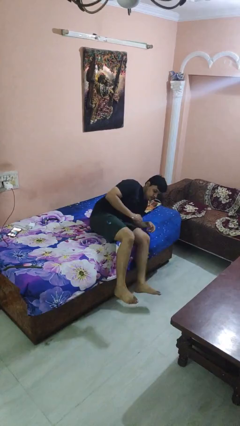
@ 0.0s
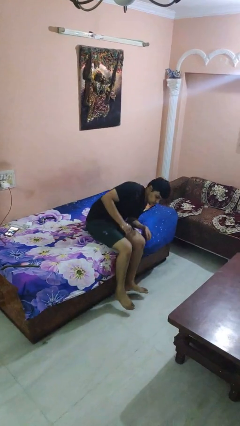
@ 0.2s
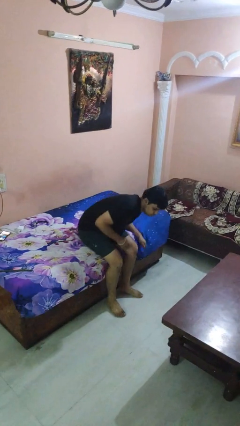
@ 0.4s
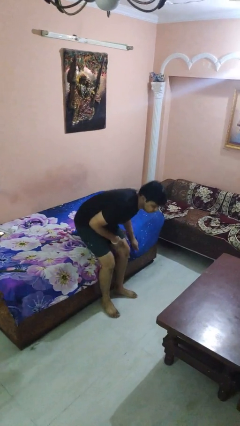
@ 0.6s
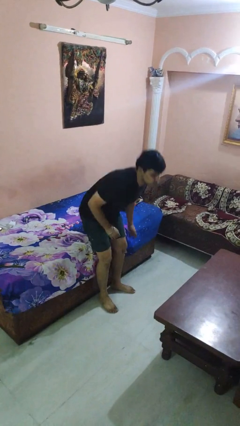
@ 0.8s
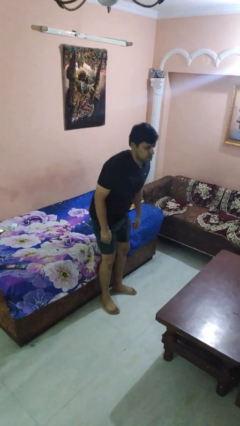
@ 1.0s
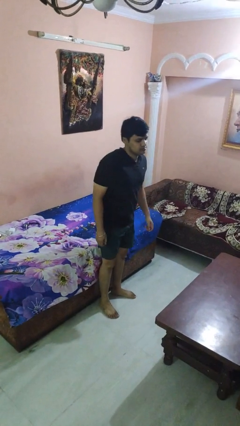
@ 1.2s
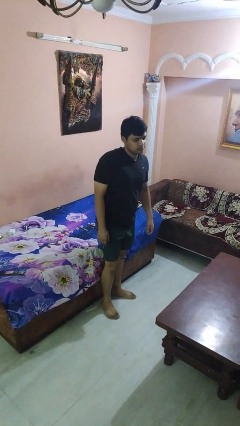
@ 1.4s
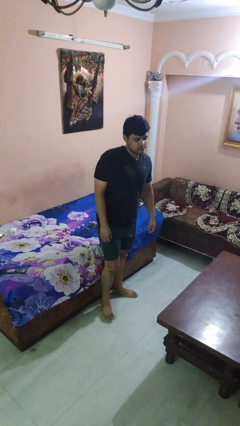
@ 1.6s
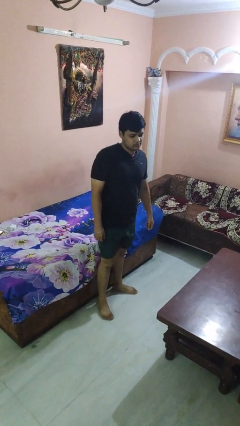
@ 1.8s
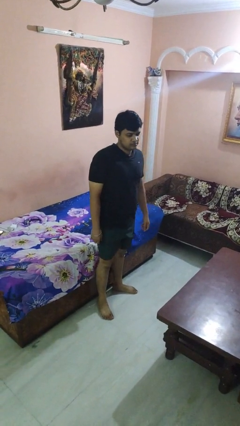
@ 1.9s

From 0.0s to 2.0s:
person stands up

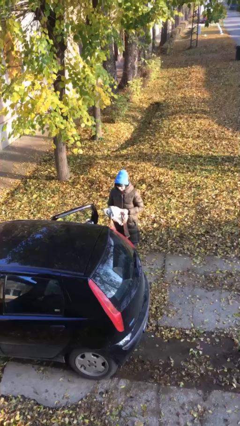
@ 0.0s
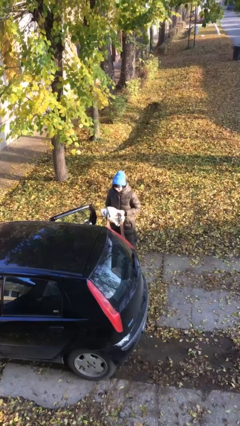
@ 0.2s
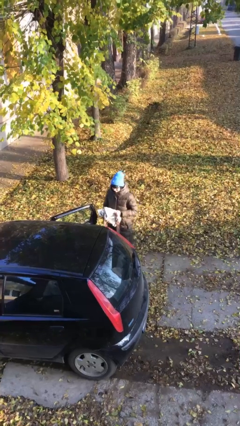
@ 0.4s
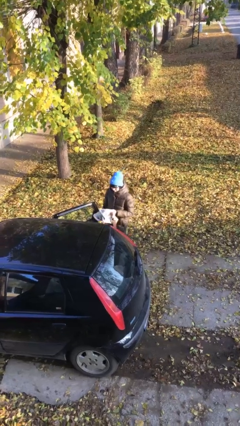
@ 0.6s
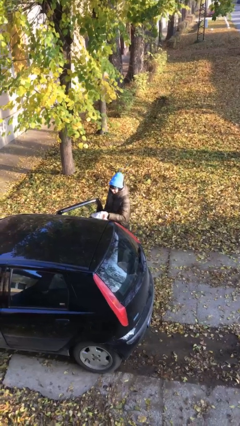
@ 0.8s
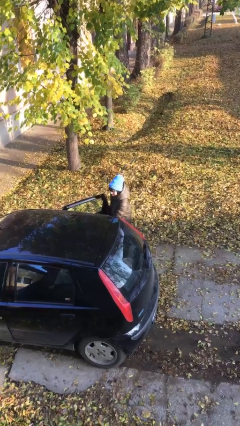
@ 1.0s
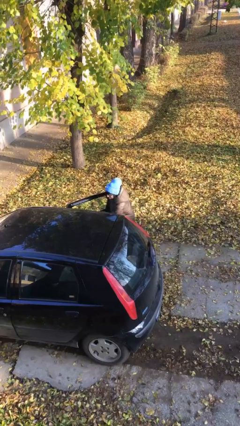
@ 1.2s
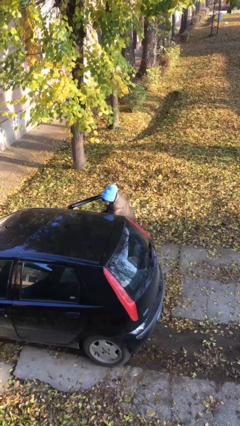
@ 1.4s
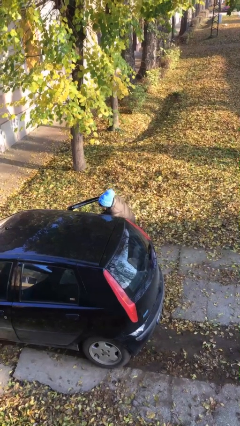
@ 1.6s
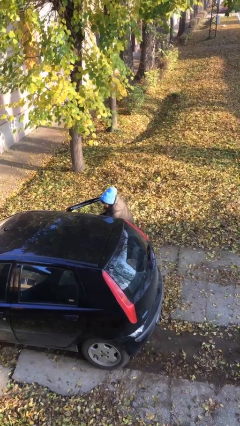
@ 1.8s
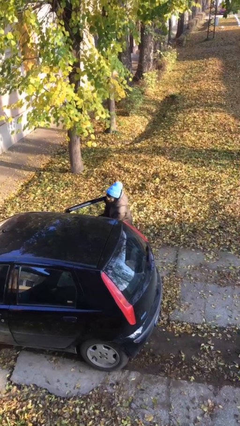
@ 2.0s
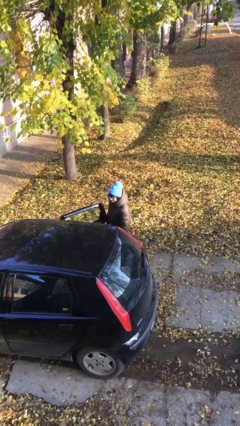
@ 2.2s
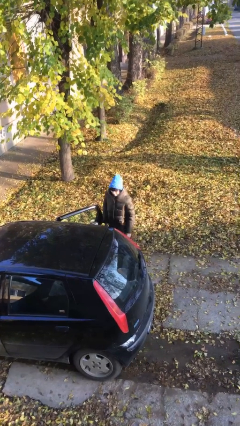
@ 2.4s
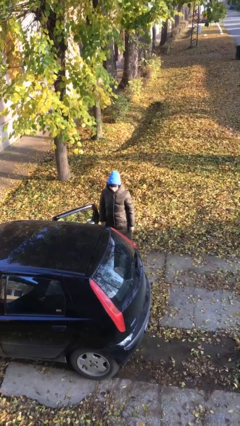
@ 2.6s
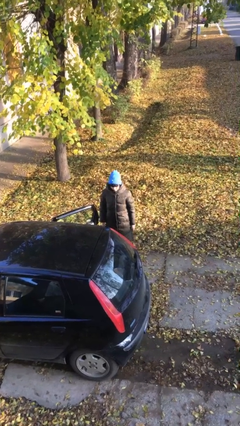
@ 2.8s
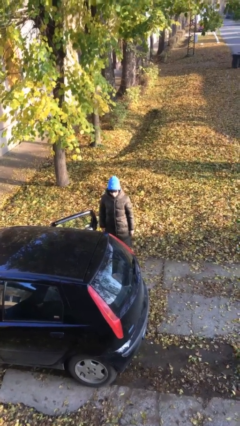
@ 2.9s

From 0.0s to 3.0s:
person loads car

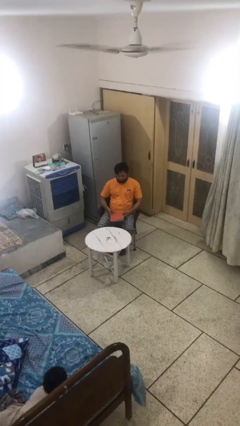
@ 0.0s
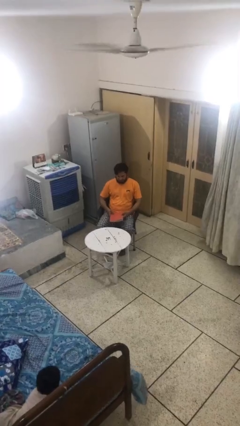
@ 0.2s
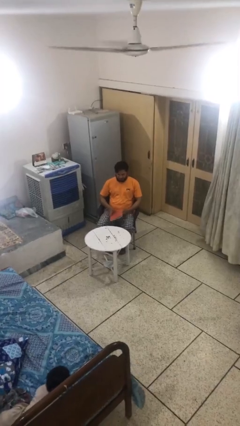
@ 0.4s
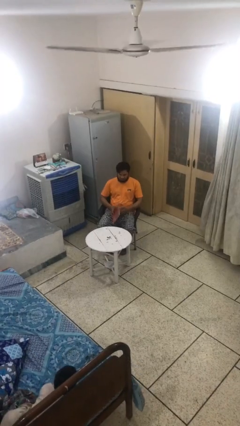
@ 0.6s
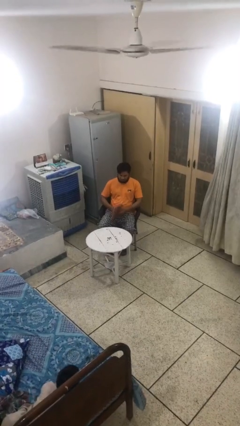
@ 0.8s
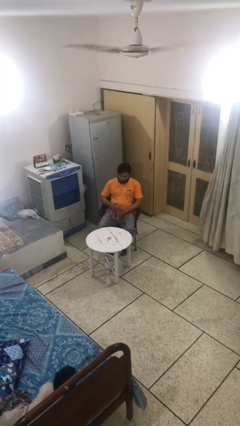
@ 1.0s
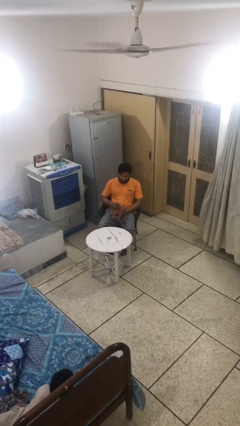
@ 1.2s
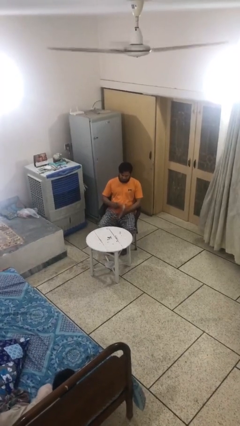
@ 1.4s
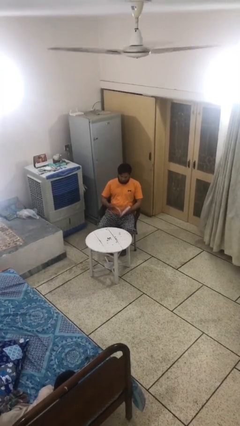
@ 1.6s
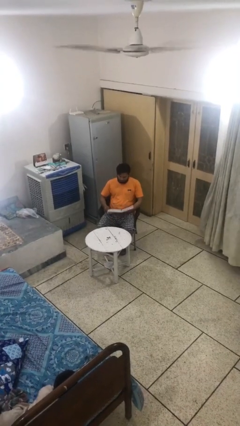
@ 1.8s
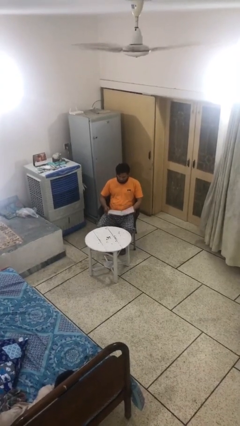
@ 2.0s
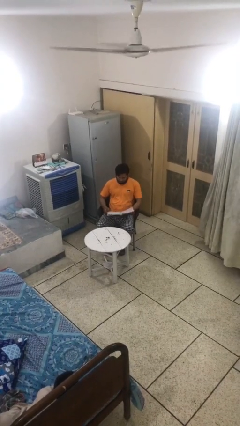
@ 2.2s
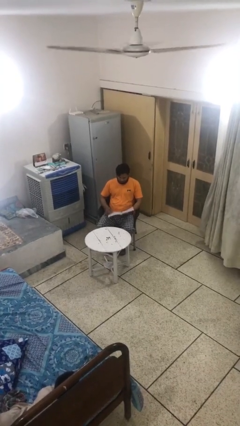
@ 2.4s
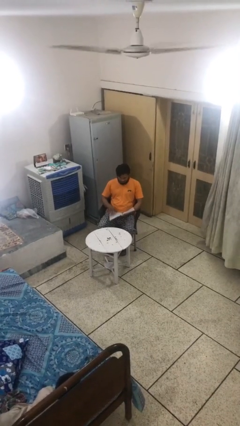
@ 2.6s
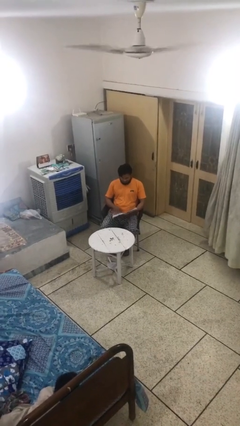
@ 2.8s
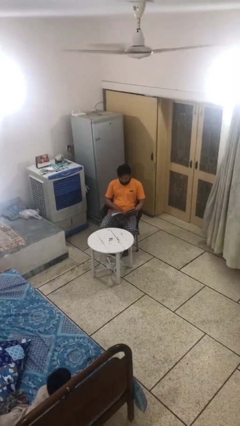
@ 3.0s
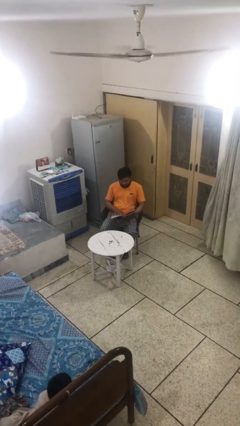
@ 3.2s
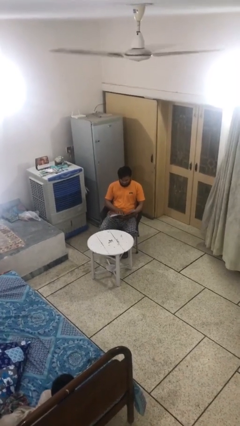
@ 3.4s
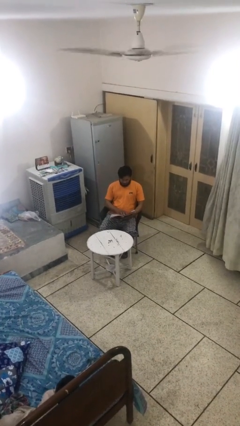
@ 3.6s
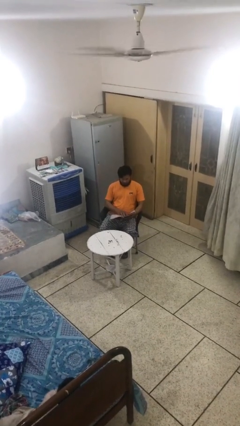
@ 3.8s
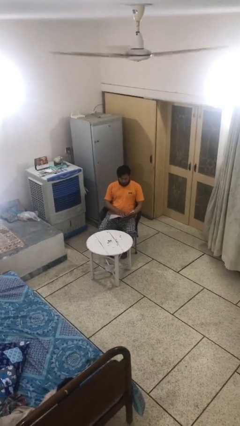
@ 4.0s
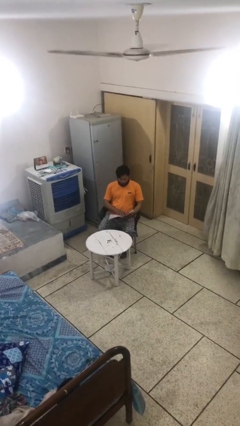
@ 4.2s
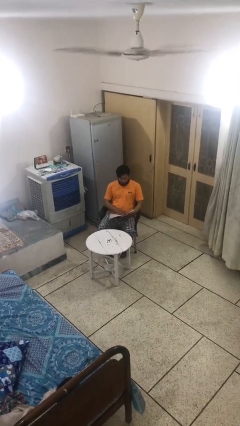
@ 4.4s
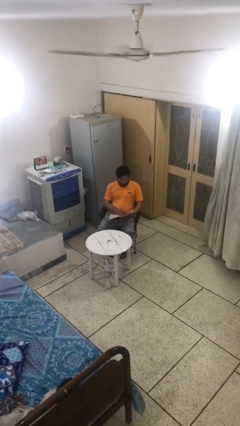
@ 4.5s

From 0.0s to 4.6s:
person reads document

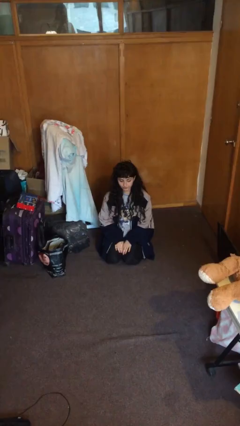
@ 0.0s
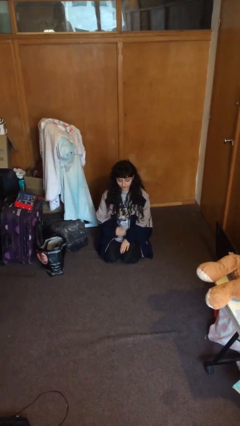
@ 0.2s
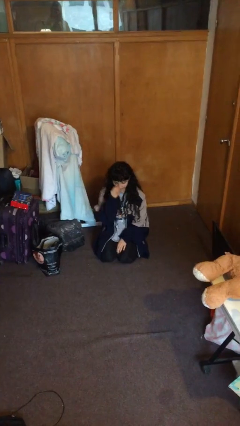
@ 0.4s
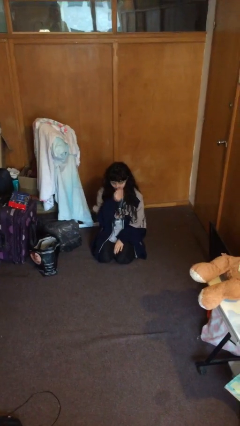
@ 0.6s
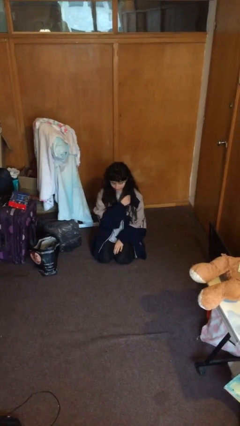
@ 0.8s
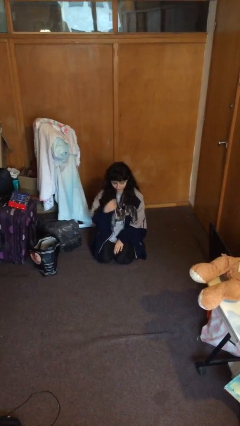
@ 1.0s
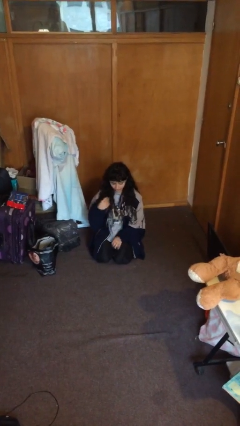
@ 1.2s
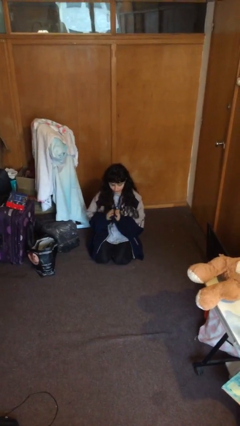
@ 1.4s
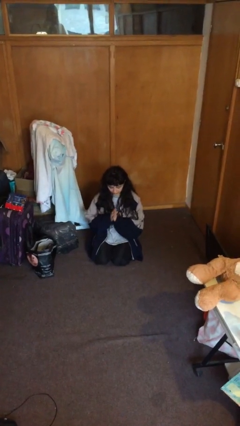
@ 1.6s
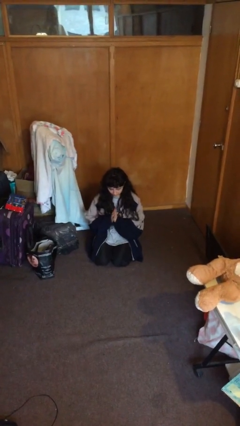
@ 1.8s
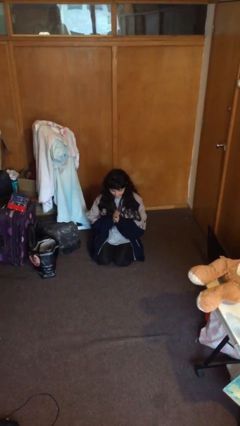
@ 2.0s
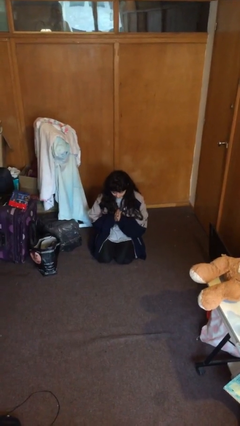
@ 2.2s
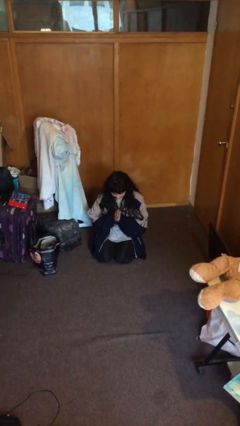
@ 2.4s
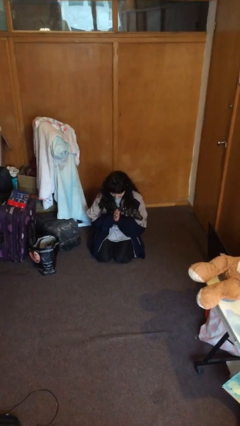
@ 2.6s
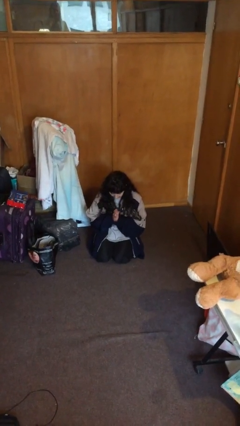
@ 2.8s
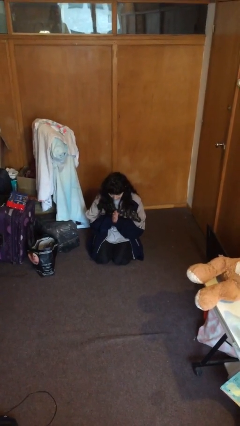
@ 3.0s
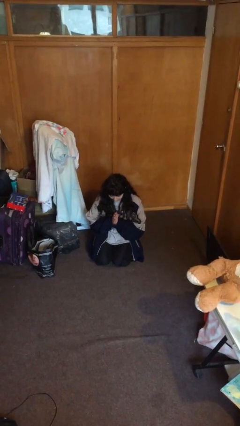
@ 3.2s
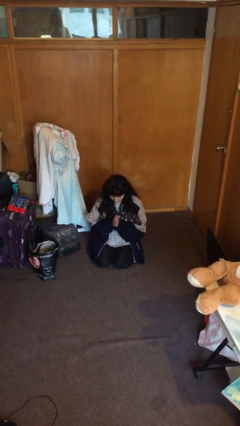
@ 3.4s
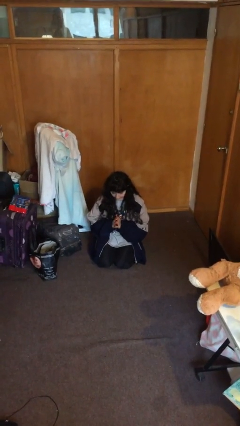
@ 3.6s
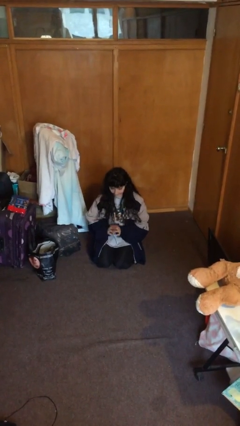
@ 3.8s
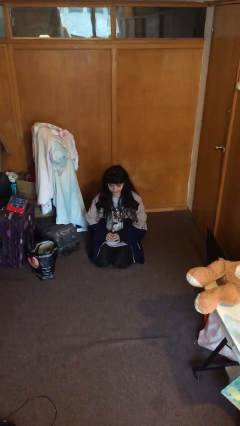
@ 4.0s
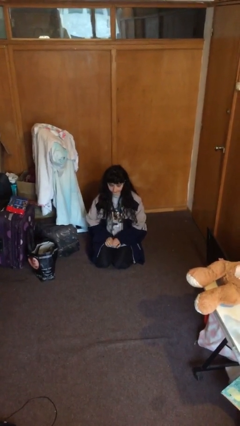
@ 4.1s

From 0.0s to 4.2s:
person prays

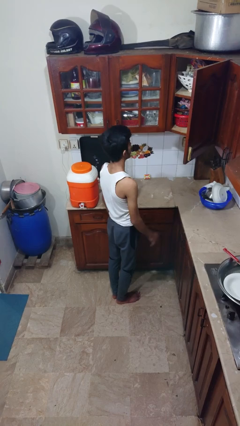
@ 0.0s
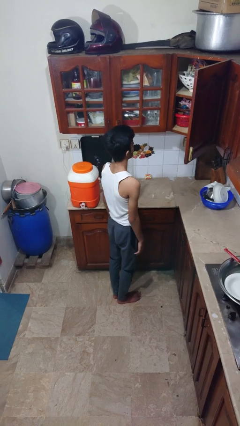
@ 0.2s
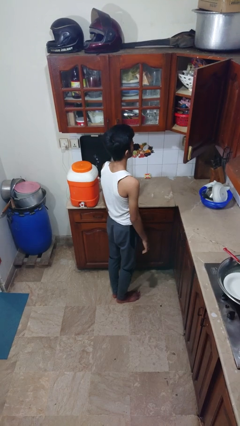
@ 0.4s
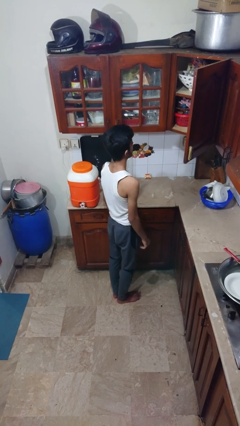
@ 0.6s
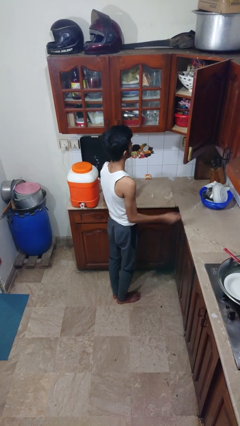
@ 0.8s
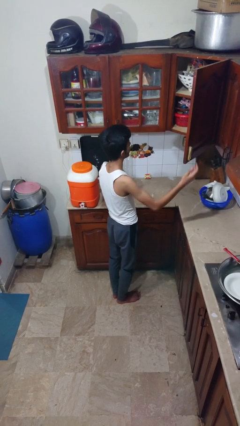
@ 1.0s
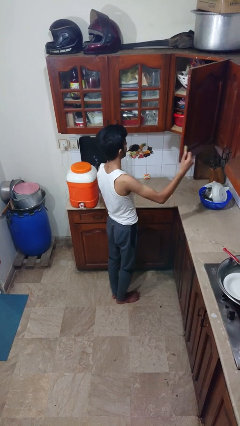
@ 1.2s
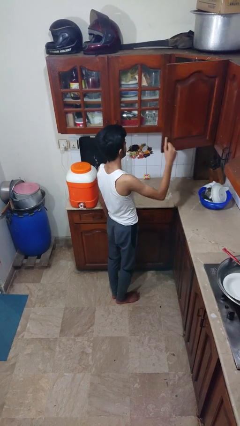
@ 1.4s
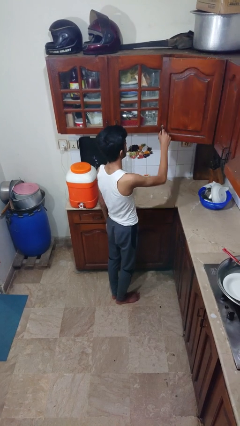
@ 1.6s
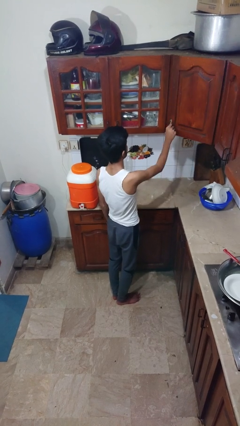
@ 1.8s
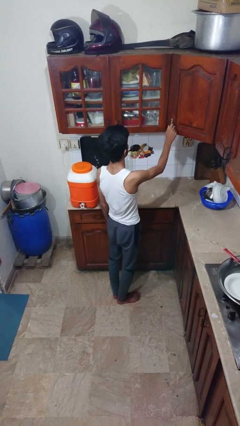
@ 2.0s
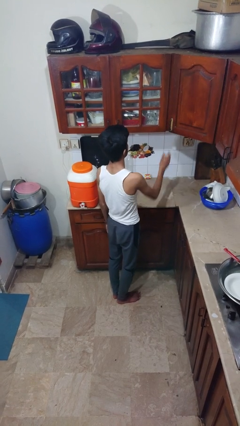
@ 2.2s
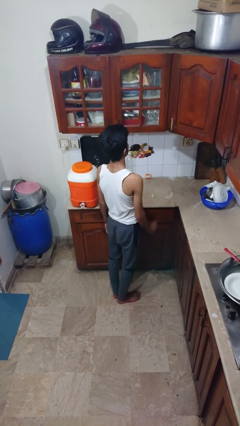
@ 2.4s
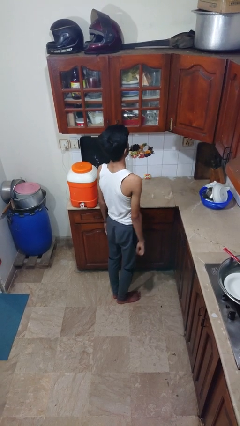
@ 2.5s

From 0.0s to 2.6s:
person closes cabinet

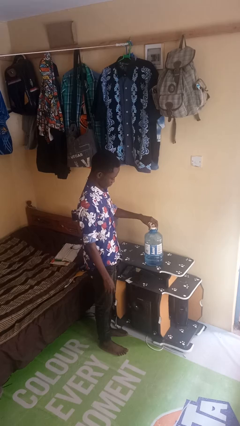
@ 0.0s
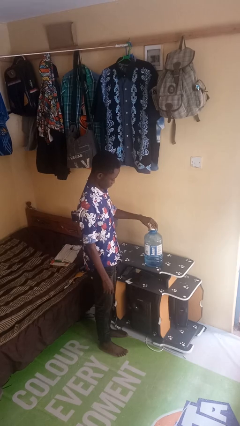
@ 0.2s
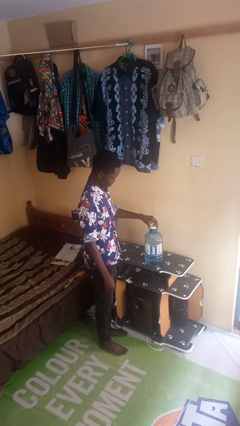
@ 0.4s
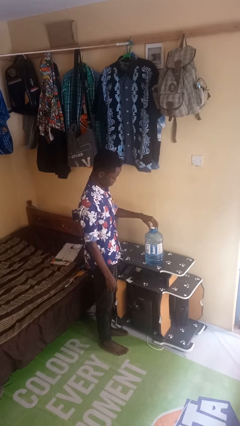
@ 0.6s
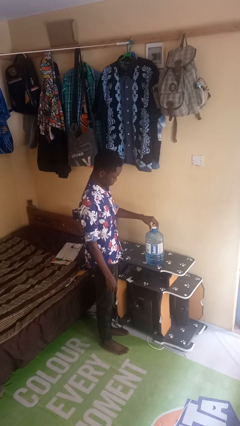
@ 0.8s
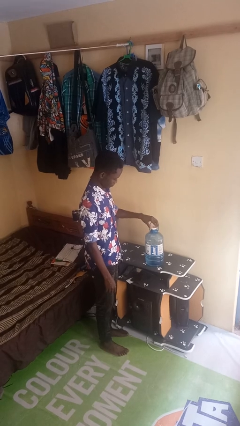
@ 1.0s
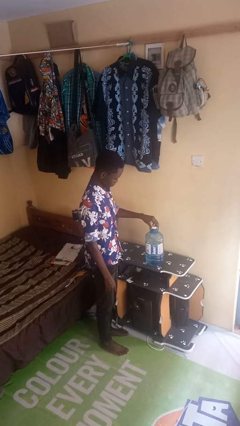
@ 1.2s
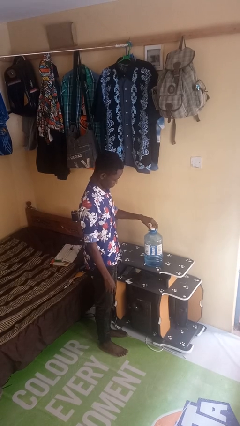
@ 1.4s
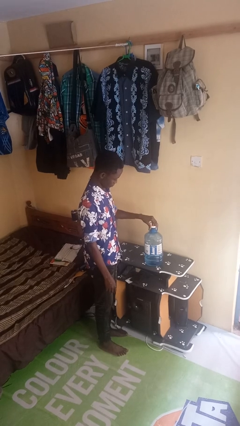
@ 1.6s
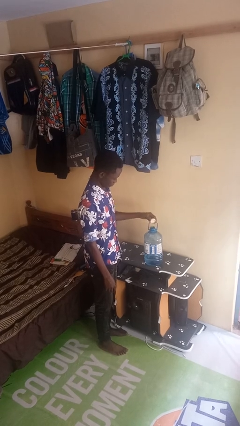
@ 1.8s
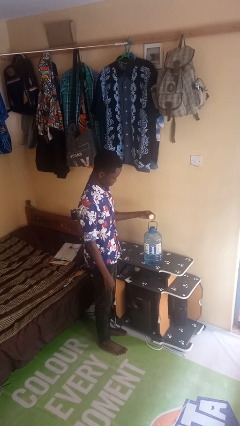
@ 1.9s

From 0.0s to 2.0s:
person unscrews lid from bottle
